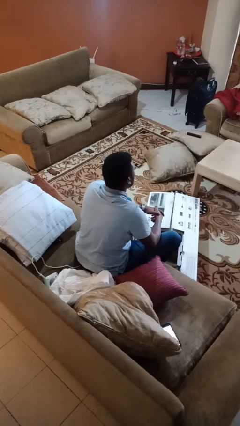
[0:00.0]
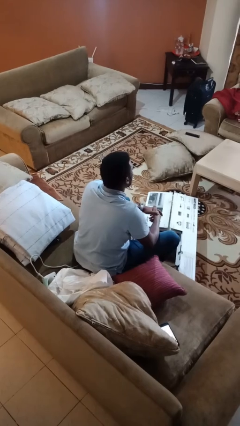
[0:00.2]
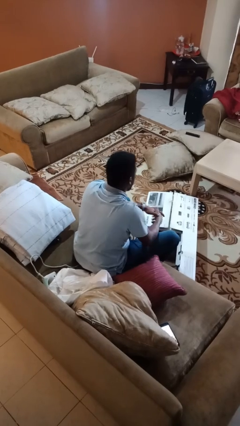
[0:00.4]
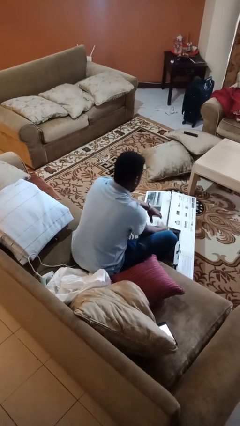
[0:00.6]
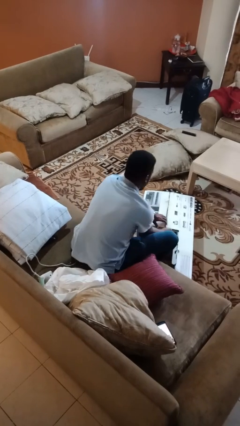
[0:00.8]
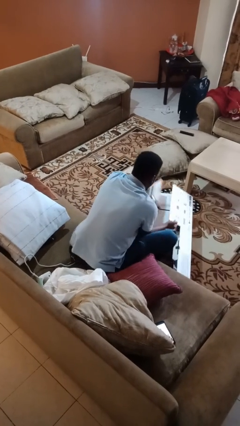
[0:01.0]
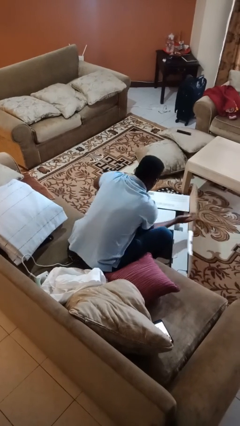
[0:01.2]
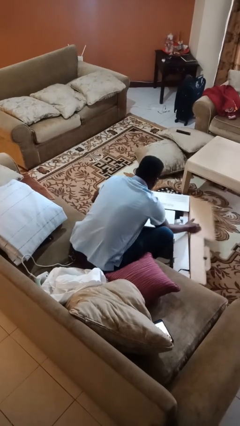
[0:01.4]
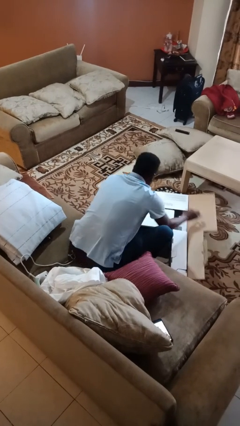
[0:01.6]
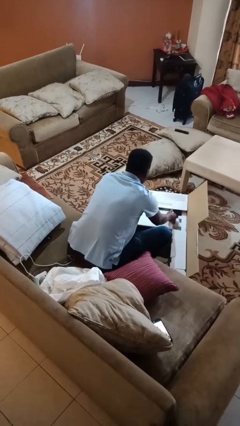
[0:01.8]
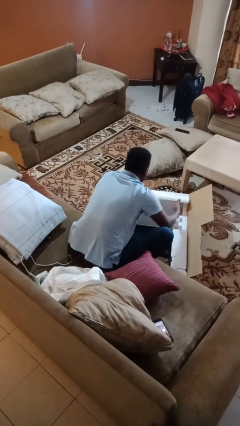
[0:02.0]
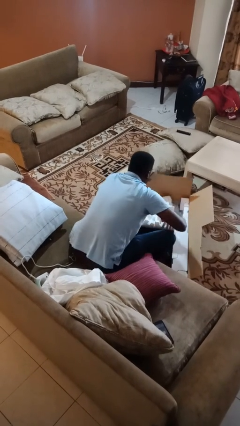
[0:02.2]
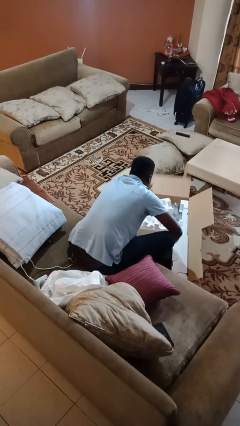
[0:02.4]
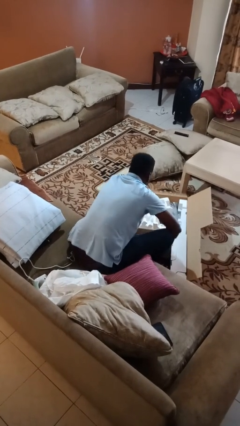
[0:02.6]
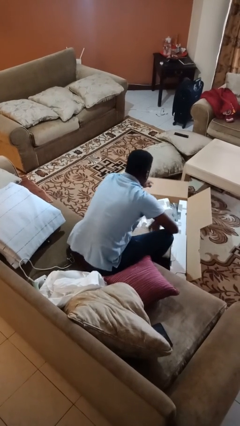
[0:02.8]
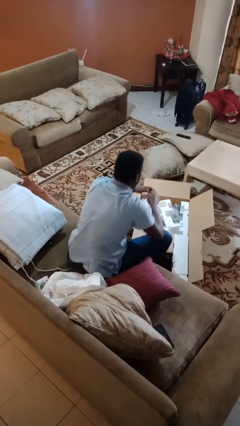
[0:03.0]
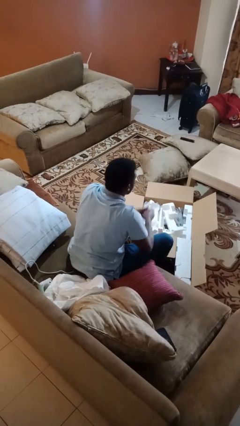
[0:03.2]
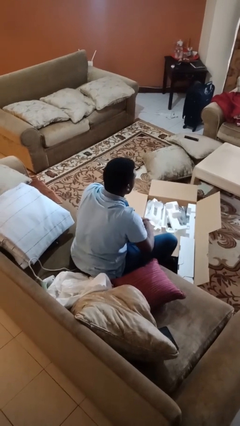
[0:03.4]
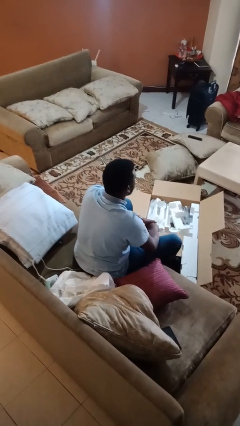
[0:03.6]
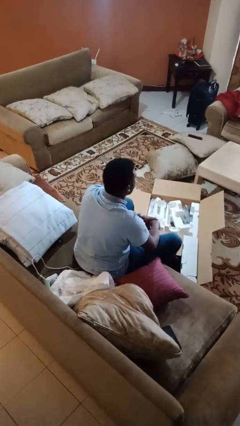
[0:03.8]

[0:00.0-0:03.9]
person opens box

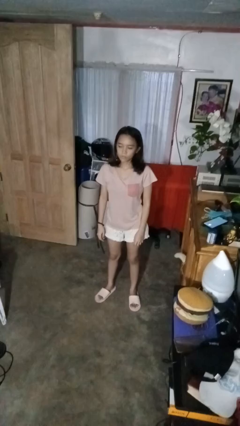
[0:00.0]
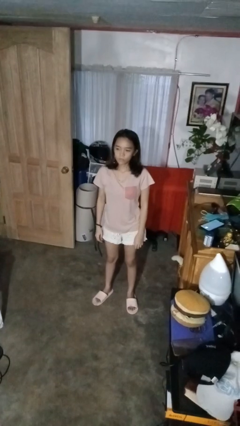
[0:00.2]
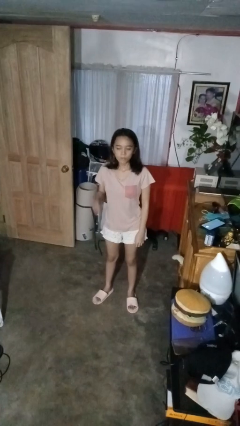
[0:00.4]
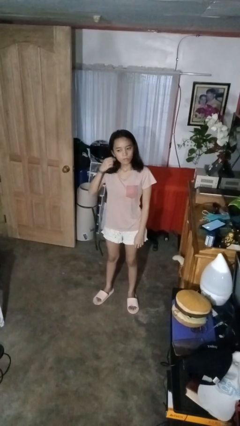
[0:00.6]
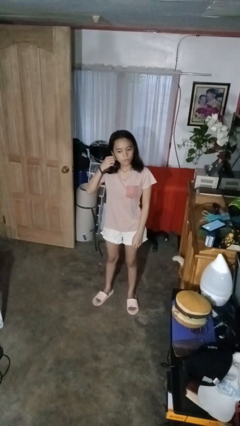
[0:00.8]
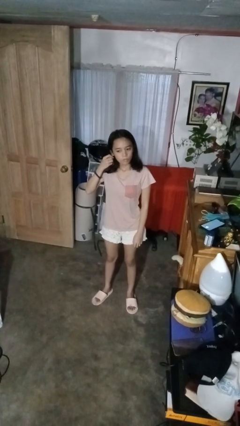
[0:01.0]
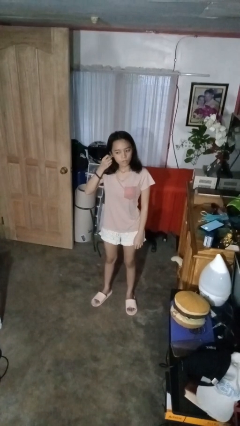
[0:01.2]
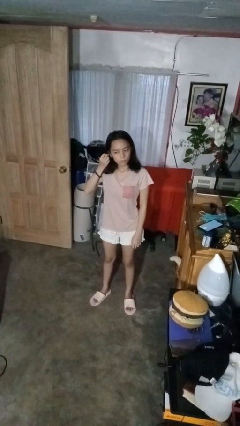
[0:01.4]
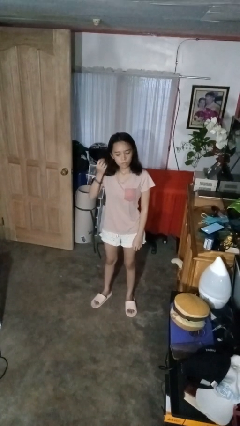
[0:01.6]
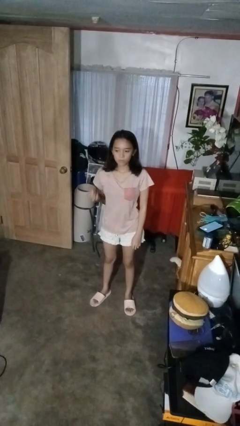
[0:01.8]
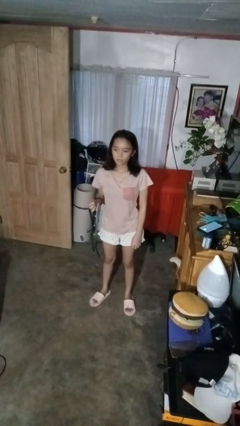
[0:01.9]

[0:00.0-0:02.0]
person takes off earrings

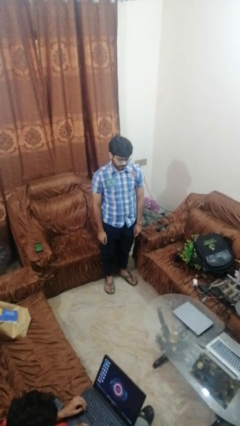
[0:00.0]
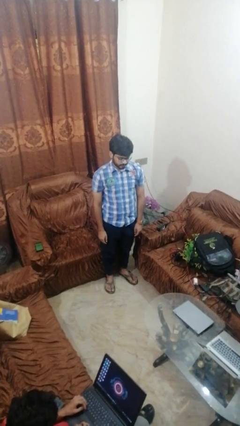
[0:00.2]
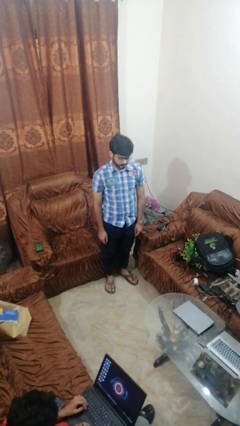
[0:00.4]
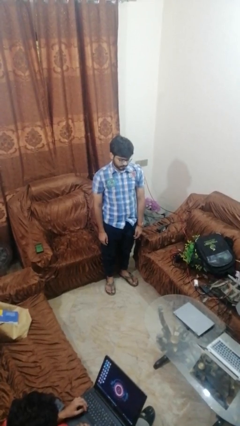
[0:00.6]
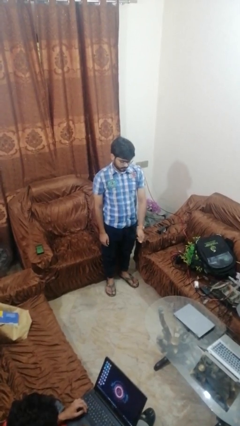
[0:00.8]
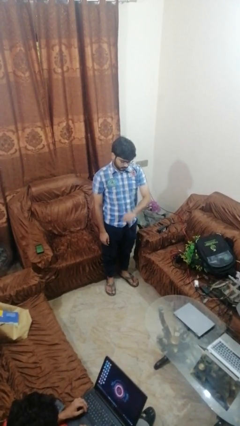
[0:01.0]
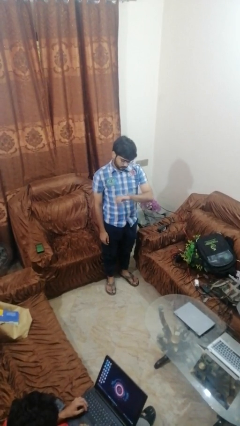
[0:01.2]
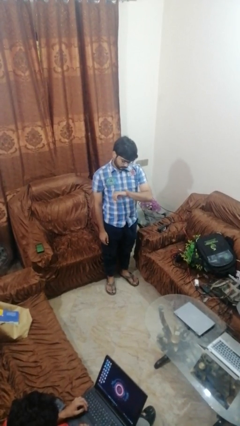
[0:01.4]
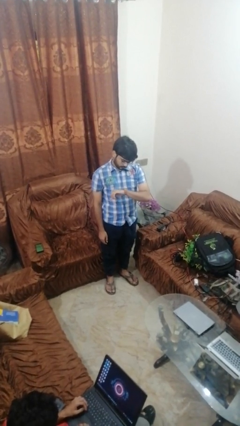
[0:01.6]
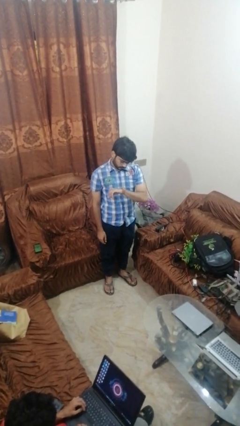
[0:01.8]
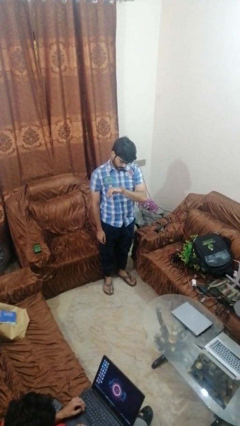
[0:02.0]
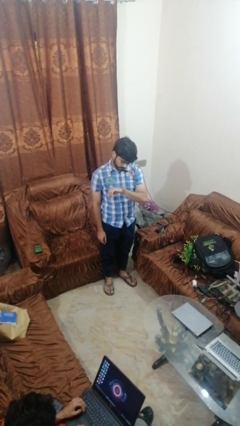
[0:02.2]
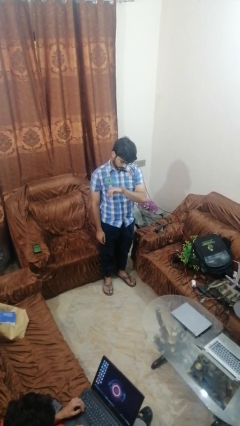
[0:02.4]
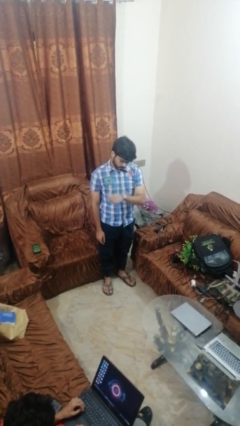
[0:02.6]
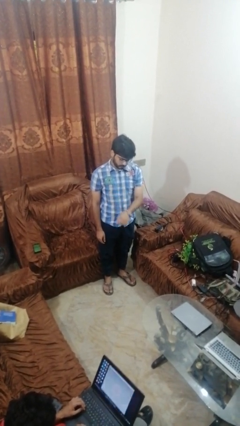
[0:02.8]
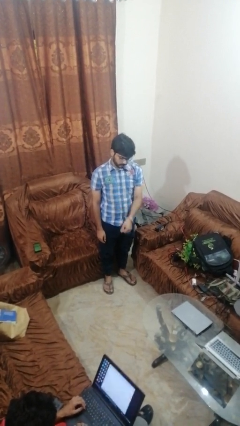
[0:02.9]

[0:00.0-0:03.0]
person looks at wristwatch

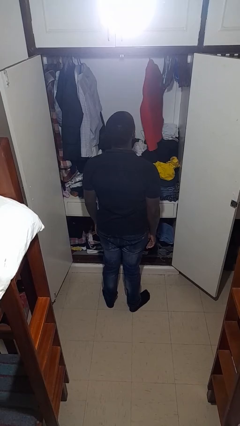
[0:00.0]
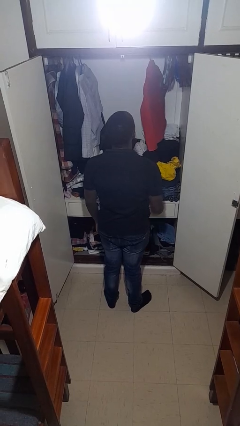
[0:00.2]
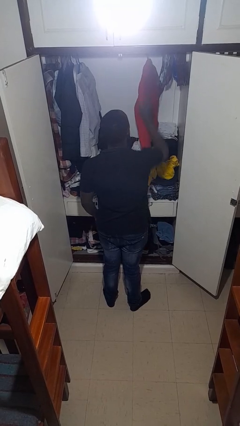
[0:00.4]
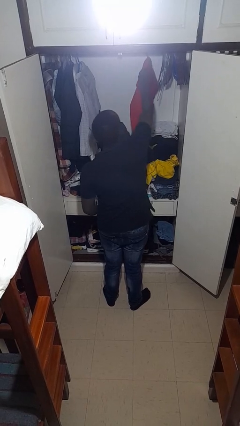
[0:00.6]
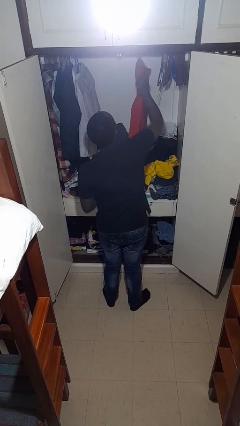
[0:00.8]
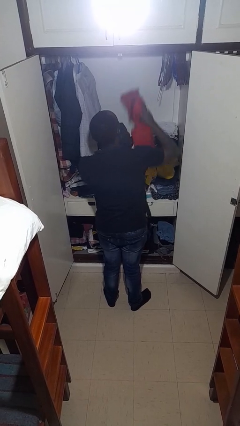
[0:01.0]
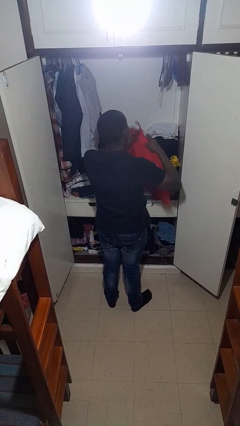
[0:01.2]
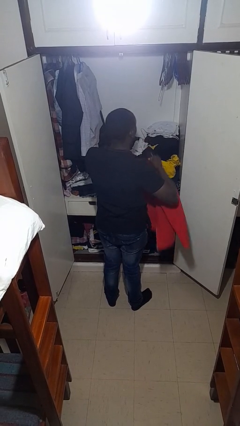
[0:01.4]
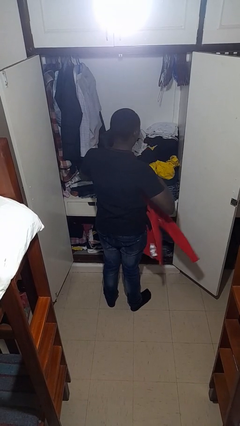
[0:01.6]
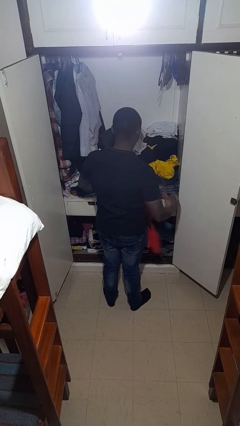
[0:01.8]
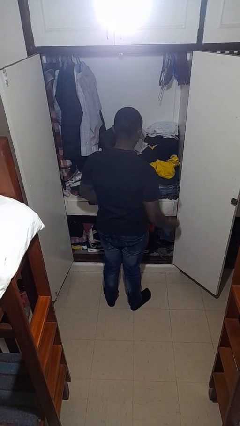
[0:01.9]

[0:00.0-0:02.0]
person takes clothes from closet

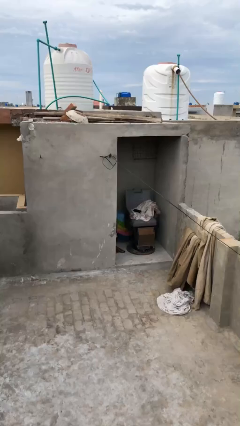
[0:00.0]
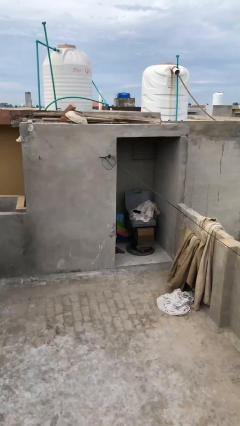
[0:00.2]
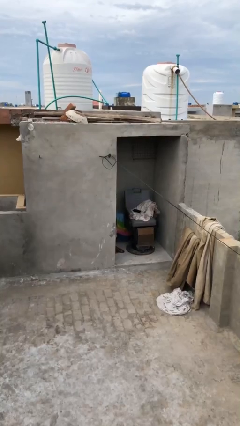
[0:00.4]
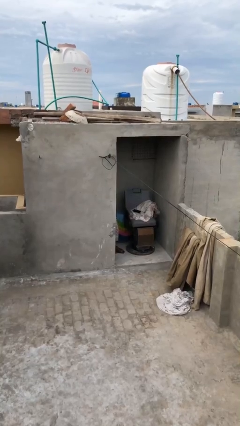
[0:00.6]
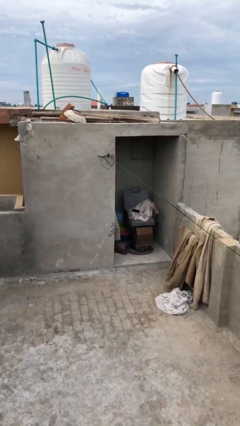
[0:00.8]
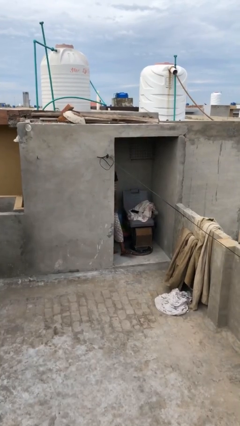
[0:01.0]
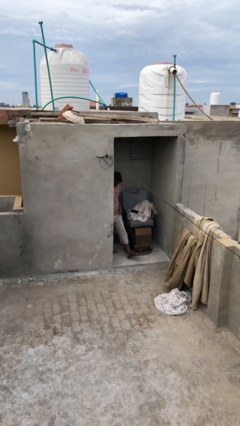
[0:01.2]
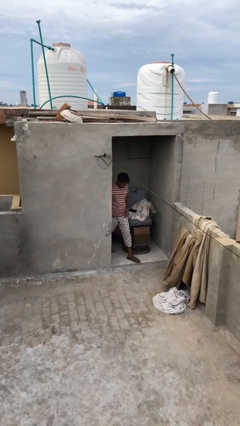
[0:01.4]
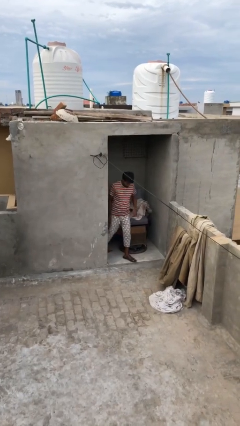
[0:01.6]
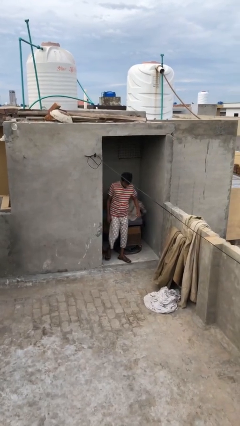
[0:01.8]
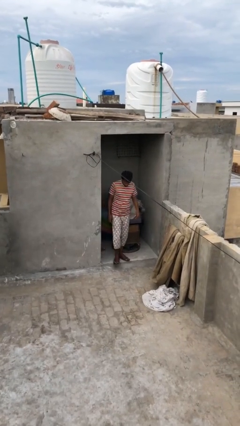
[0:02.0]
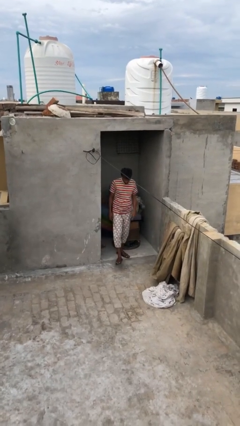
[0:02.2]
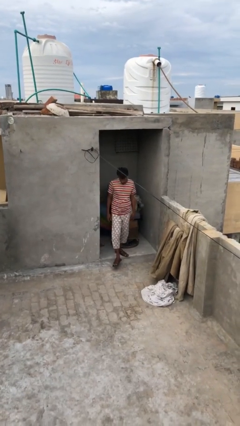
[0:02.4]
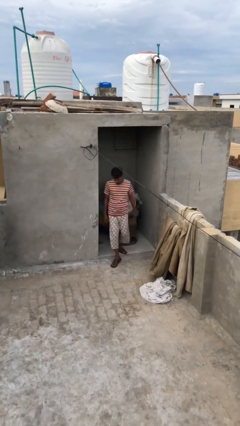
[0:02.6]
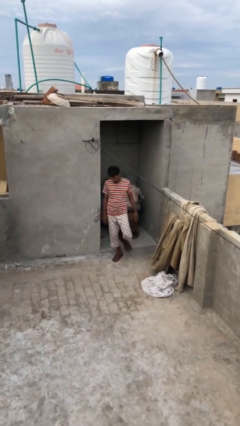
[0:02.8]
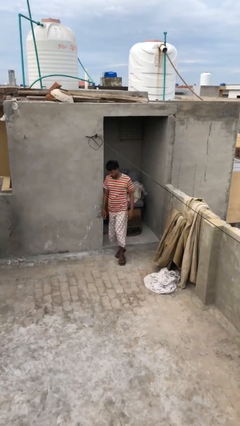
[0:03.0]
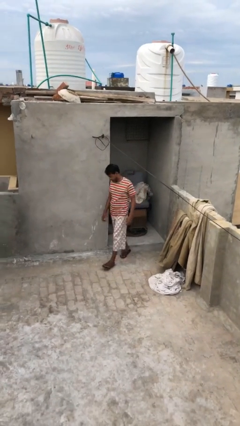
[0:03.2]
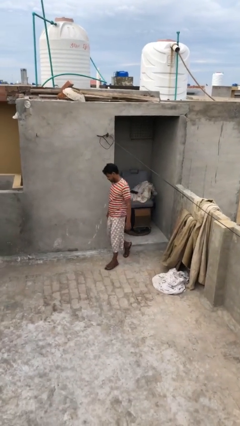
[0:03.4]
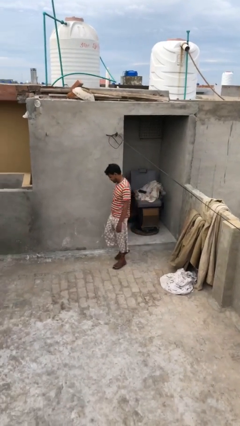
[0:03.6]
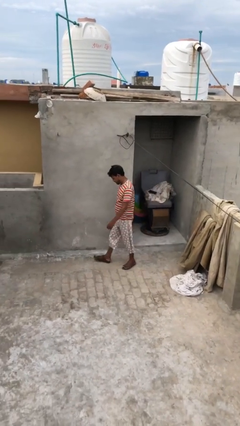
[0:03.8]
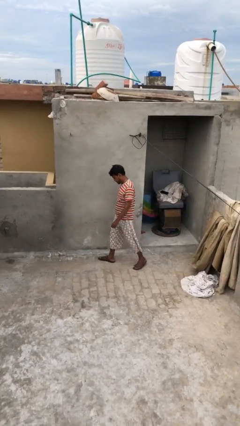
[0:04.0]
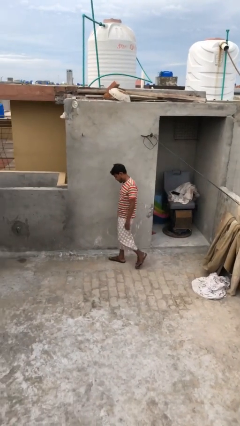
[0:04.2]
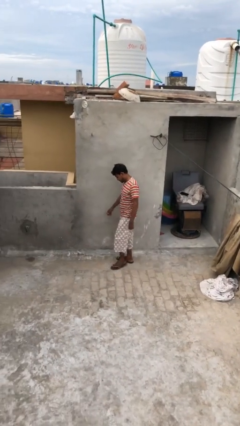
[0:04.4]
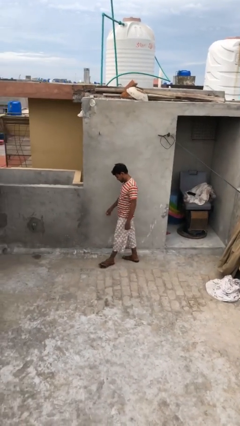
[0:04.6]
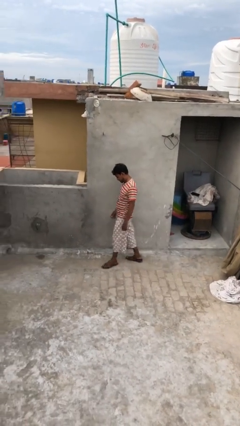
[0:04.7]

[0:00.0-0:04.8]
person enters scene through structure

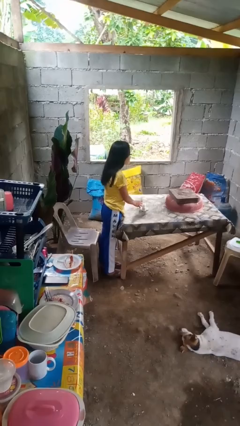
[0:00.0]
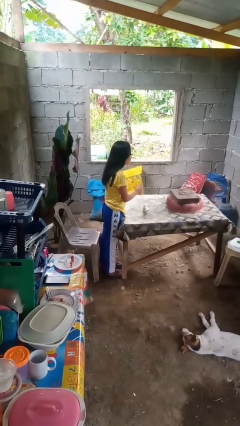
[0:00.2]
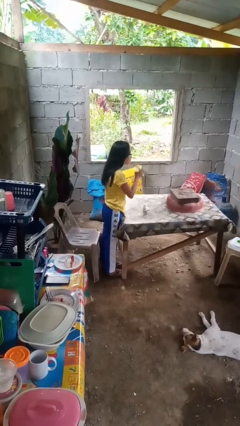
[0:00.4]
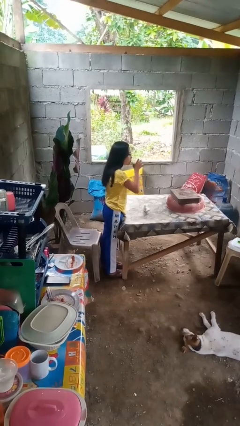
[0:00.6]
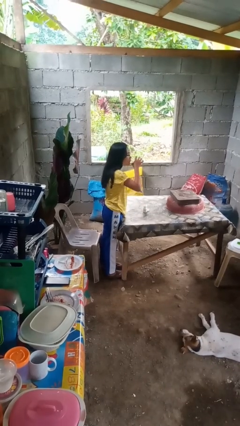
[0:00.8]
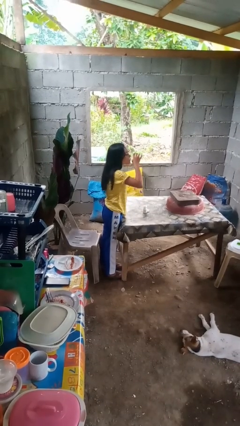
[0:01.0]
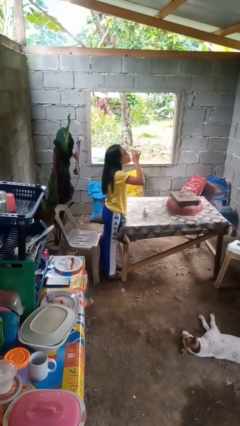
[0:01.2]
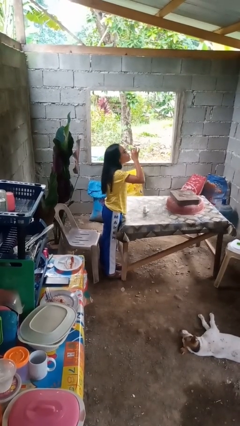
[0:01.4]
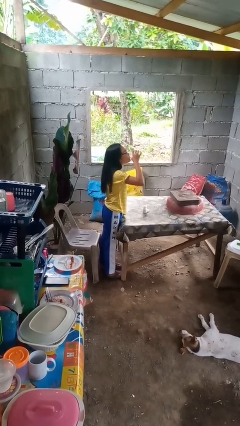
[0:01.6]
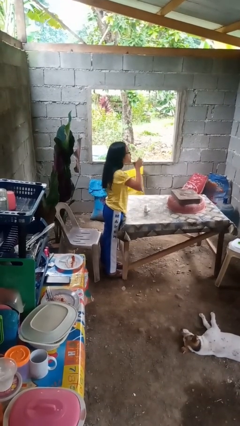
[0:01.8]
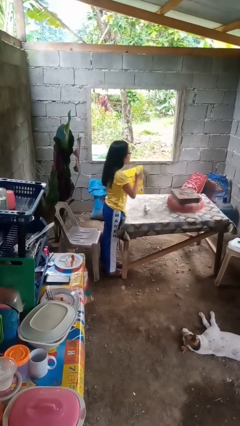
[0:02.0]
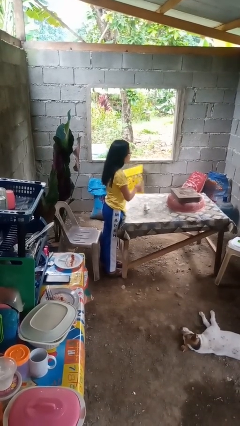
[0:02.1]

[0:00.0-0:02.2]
person drinks from cup
